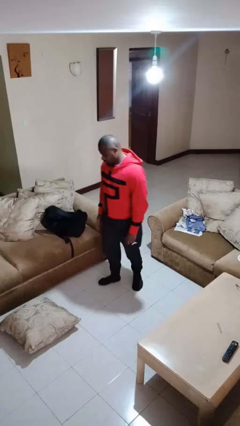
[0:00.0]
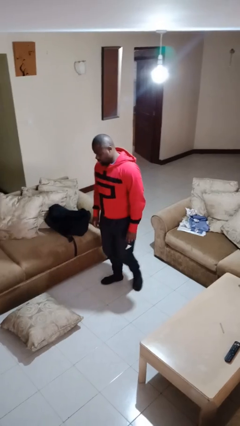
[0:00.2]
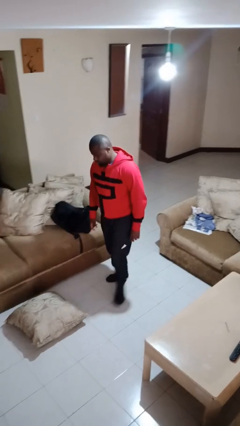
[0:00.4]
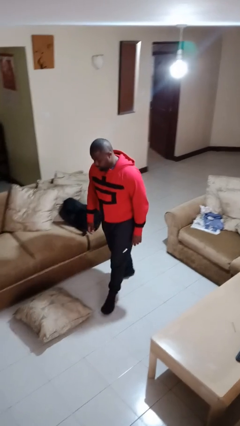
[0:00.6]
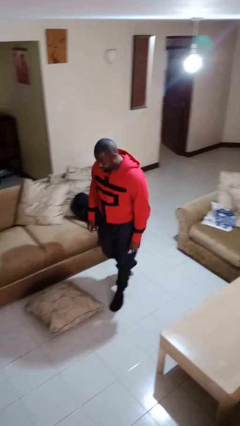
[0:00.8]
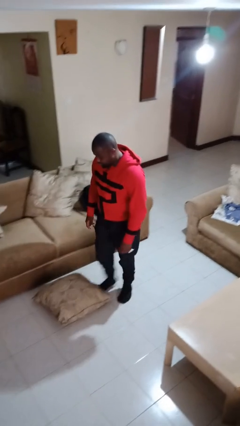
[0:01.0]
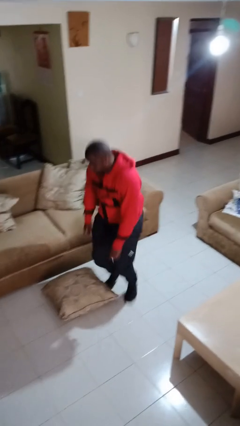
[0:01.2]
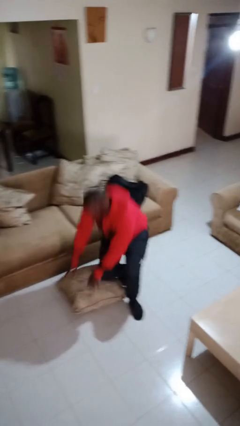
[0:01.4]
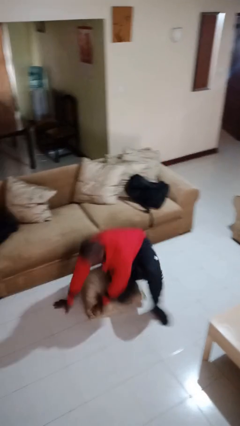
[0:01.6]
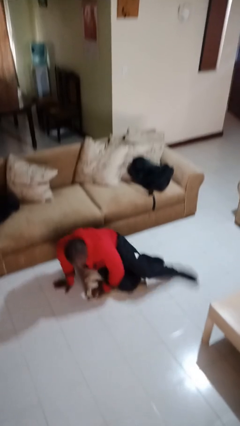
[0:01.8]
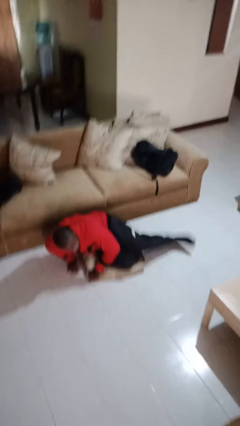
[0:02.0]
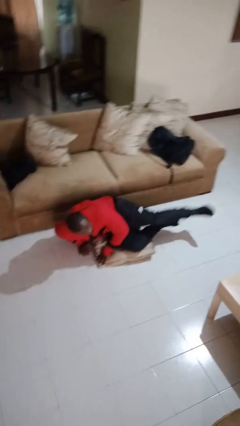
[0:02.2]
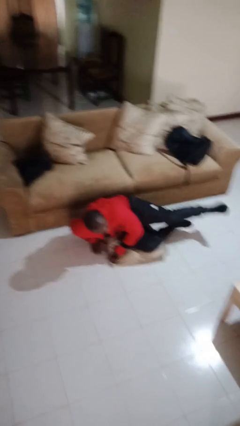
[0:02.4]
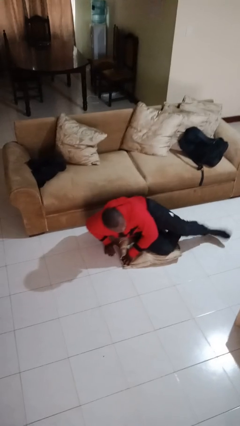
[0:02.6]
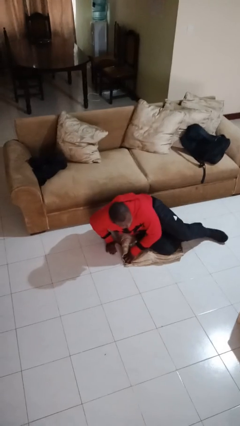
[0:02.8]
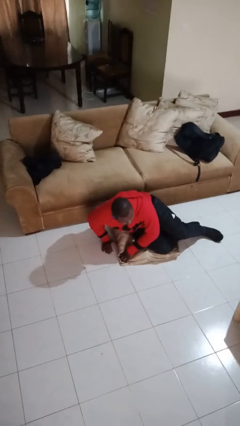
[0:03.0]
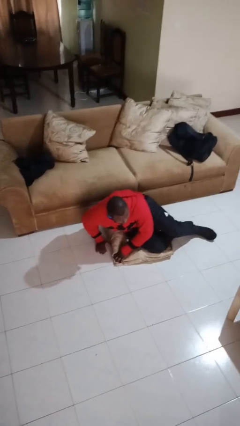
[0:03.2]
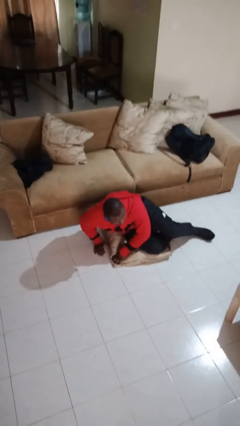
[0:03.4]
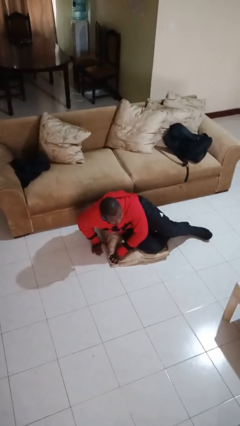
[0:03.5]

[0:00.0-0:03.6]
person trips on object on floor

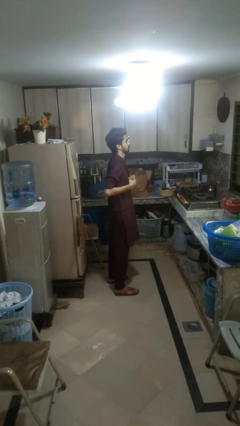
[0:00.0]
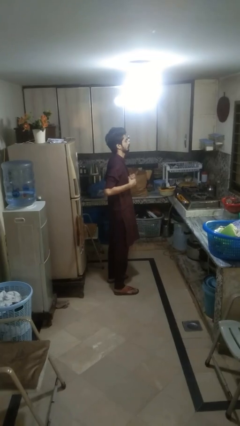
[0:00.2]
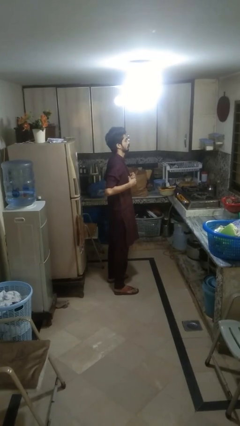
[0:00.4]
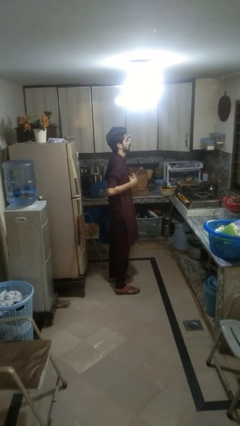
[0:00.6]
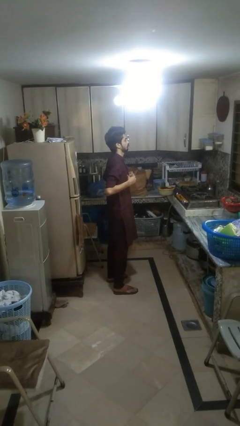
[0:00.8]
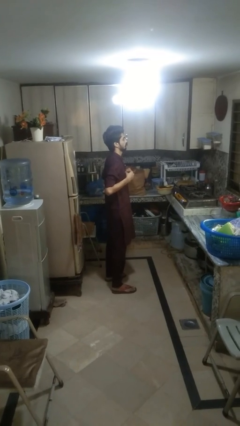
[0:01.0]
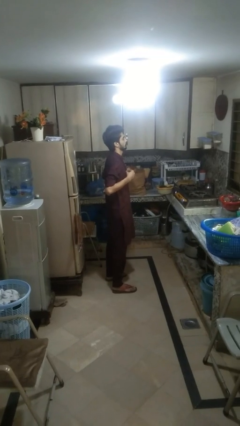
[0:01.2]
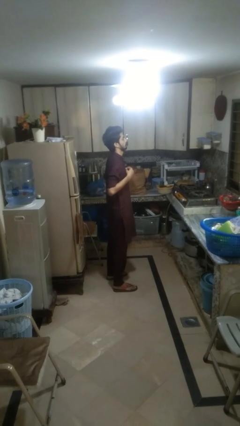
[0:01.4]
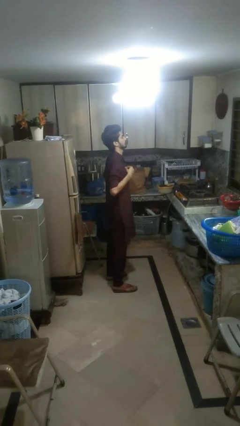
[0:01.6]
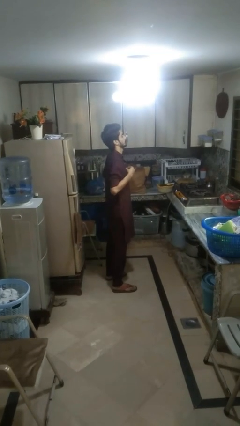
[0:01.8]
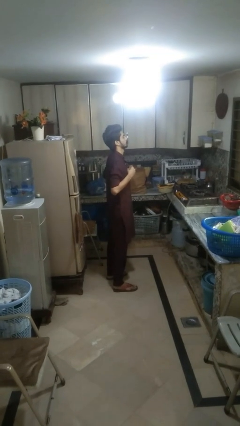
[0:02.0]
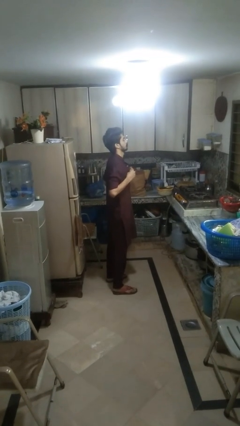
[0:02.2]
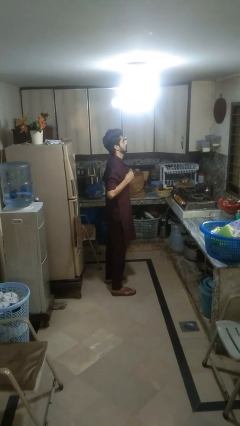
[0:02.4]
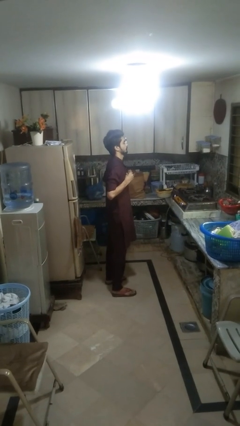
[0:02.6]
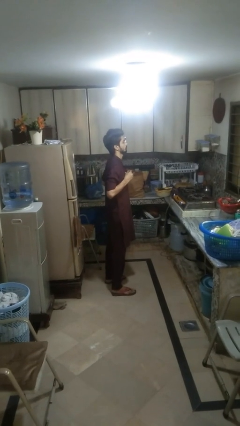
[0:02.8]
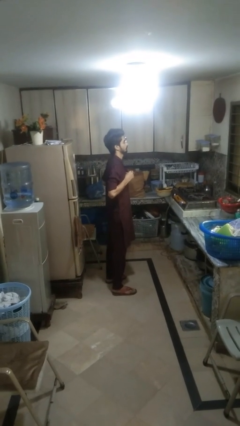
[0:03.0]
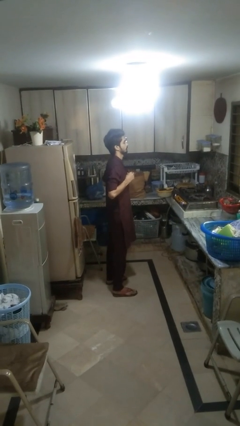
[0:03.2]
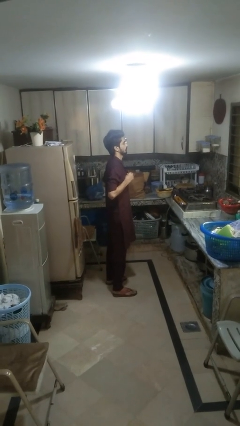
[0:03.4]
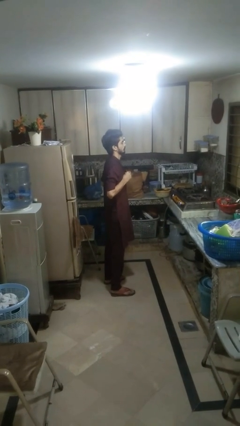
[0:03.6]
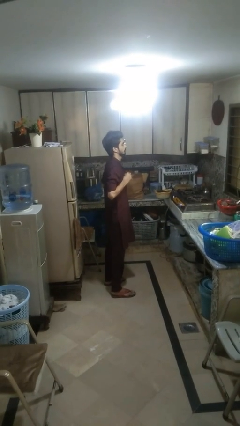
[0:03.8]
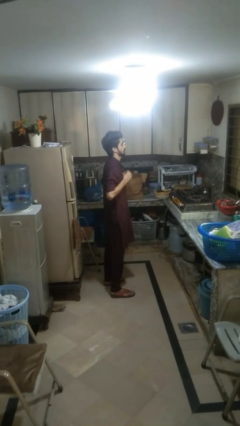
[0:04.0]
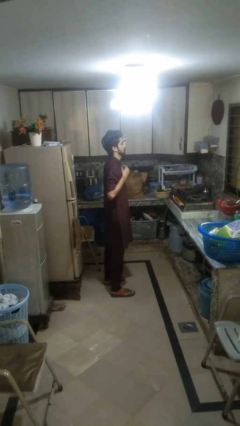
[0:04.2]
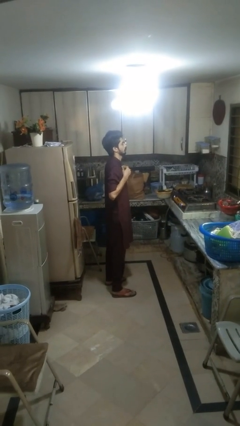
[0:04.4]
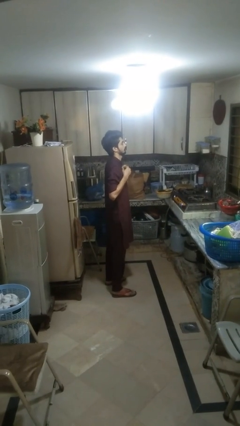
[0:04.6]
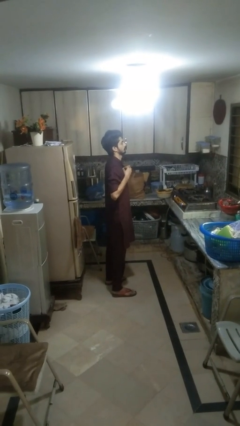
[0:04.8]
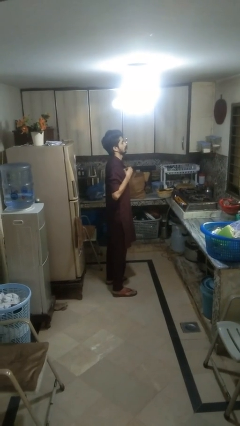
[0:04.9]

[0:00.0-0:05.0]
person buttons shirt

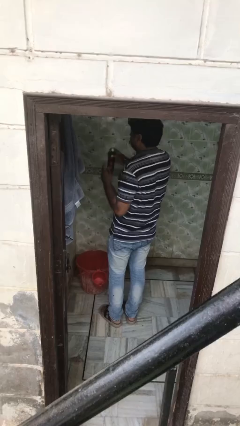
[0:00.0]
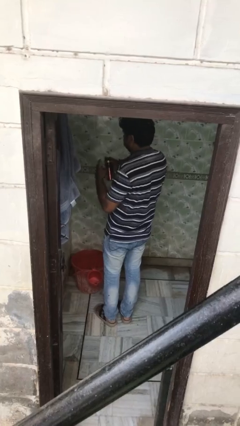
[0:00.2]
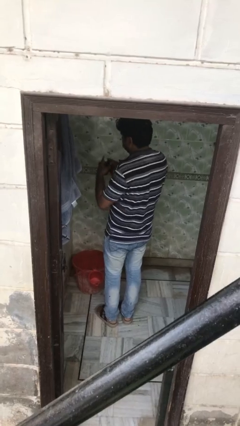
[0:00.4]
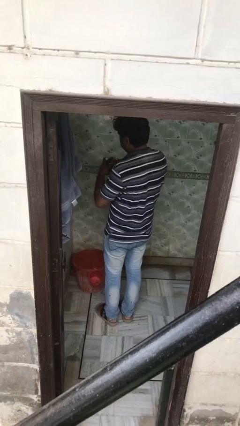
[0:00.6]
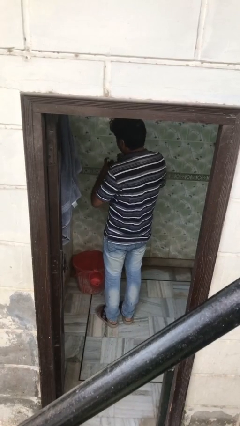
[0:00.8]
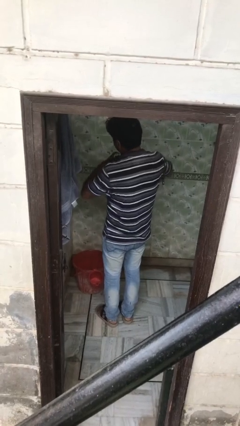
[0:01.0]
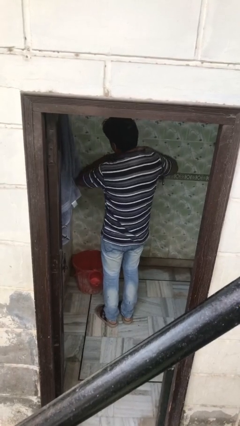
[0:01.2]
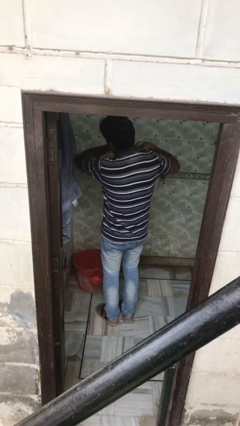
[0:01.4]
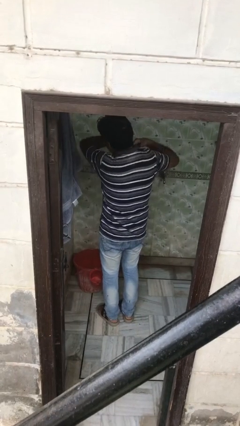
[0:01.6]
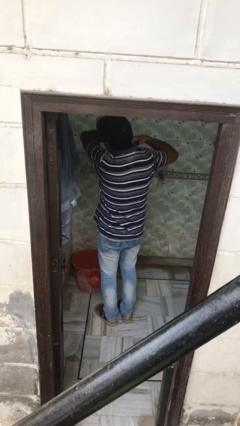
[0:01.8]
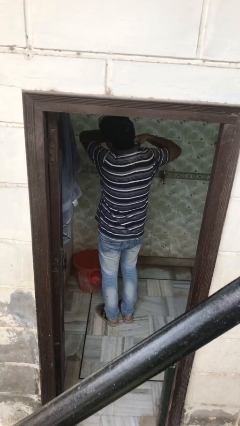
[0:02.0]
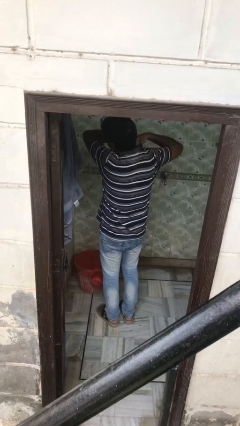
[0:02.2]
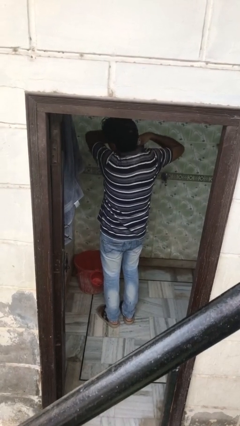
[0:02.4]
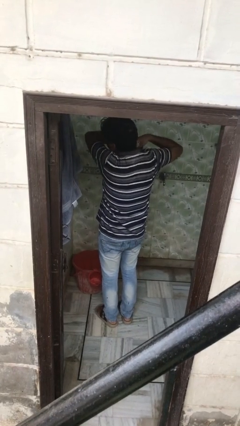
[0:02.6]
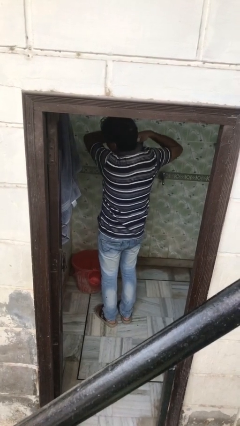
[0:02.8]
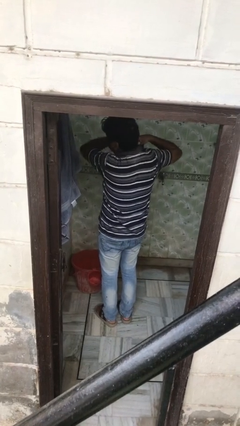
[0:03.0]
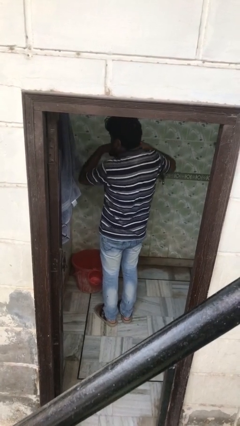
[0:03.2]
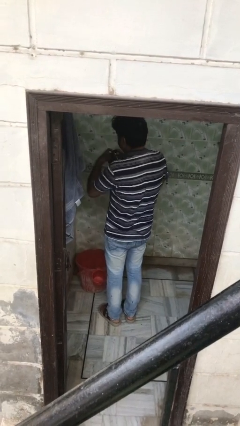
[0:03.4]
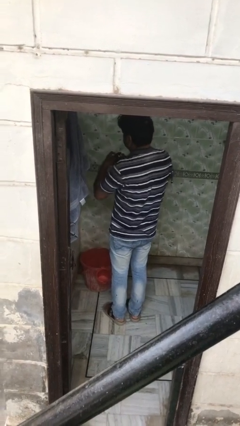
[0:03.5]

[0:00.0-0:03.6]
person applies deodorant

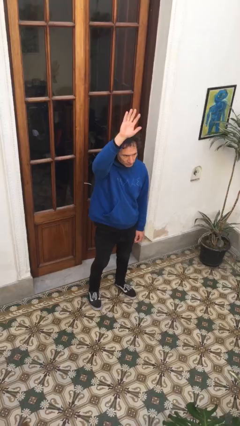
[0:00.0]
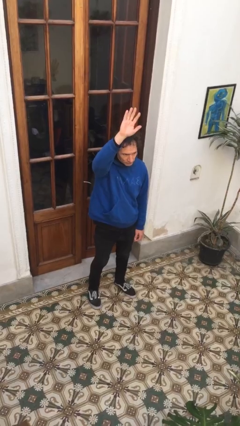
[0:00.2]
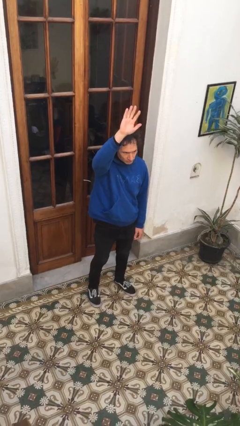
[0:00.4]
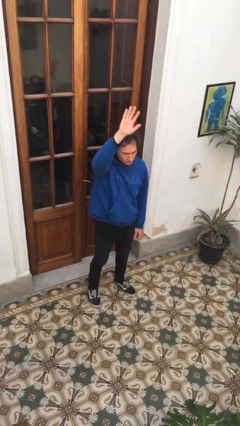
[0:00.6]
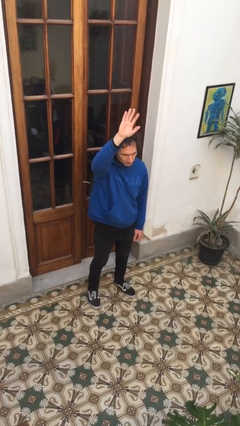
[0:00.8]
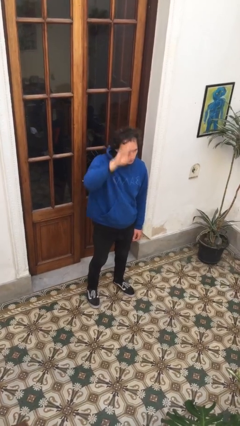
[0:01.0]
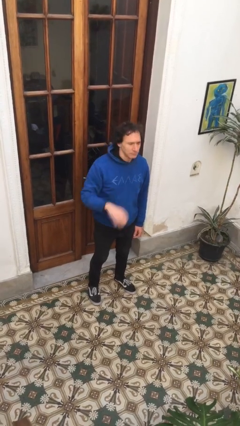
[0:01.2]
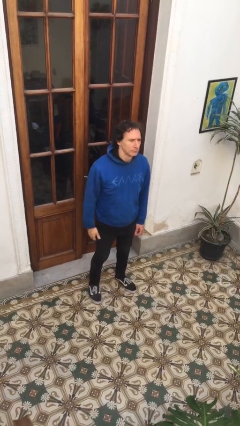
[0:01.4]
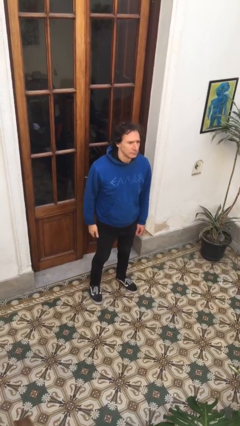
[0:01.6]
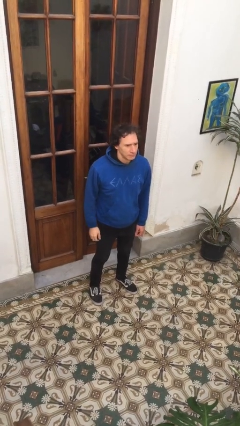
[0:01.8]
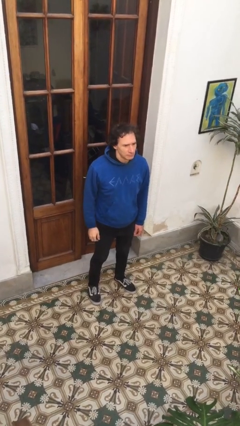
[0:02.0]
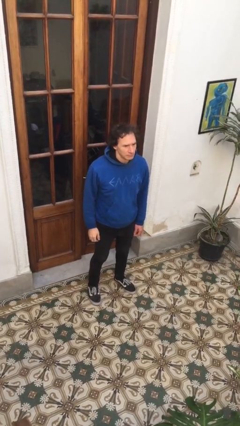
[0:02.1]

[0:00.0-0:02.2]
person gestures lower hand

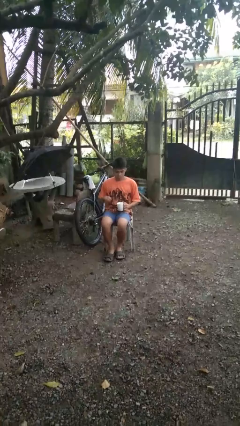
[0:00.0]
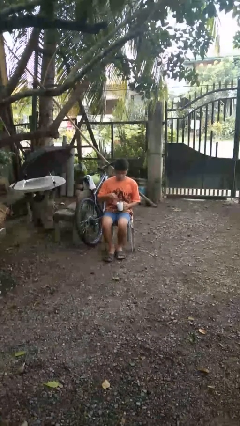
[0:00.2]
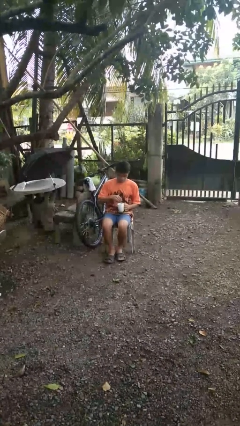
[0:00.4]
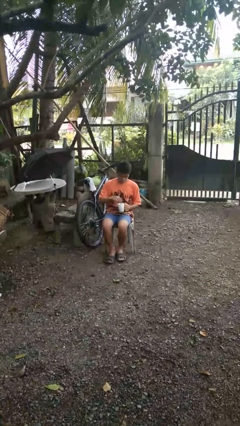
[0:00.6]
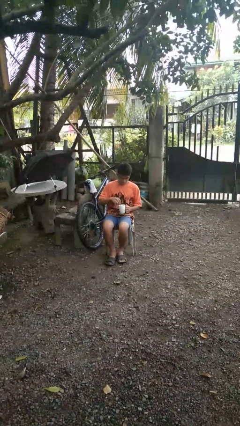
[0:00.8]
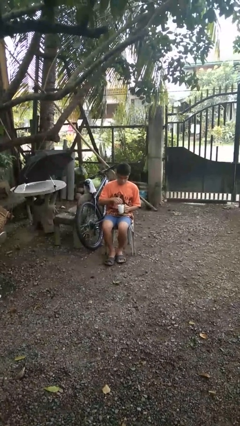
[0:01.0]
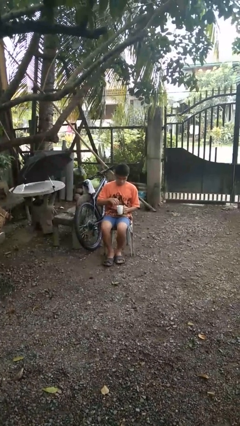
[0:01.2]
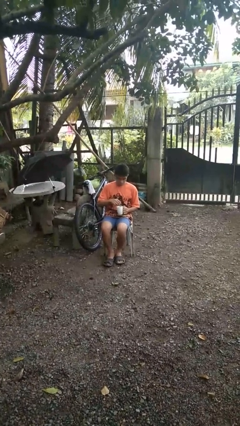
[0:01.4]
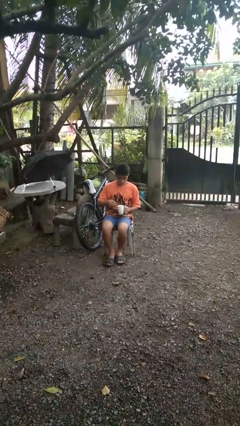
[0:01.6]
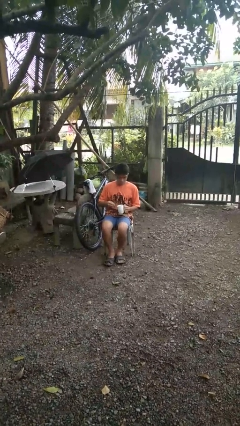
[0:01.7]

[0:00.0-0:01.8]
person stirs mug

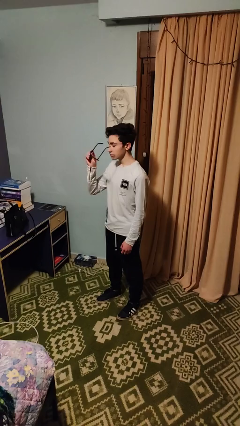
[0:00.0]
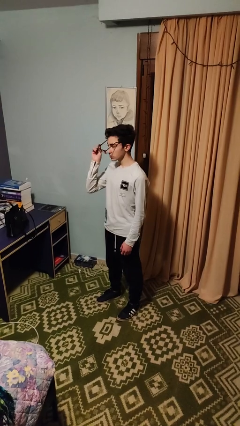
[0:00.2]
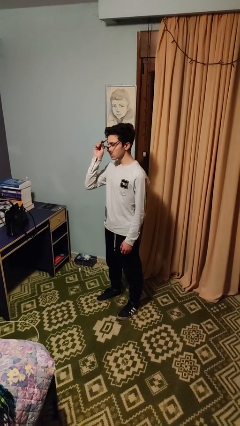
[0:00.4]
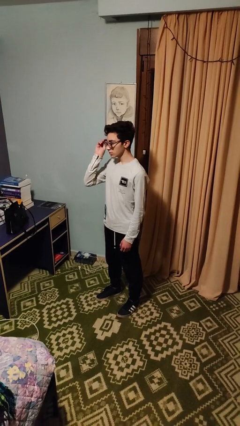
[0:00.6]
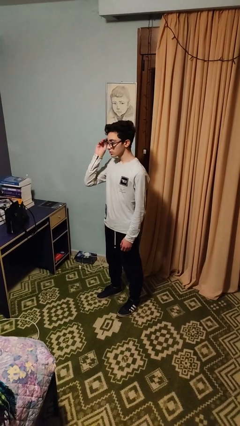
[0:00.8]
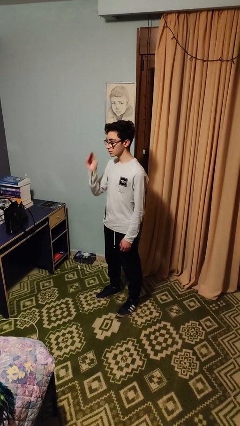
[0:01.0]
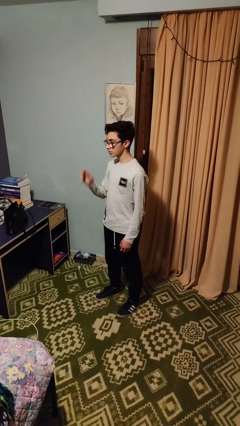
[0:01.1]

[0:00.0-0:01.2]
person puts on glasses
